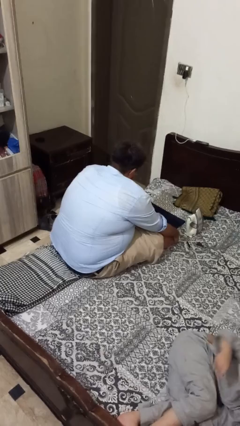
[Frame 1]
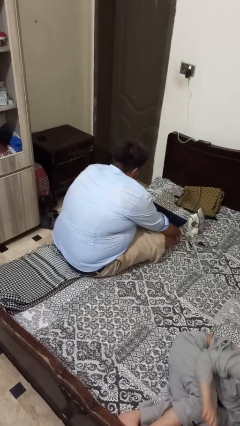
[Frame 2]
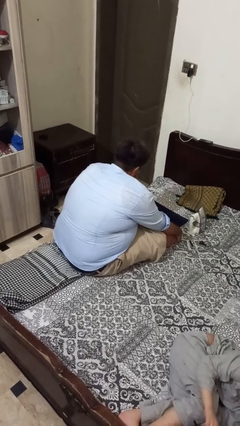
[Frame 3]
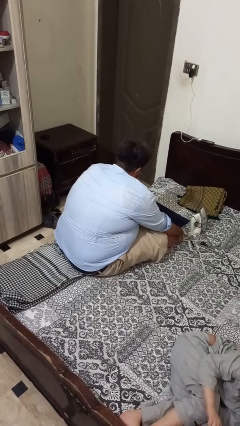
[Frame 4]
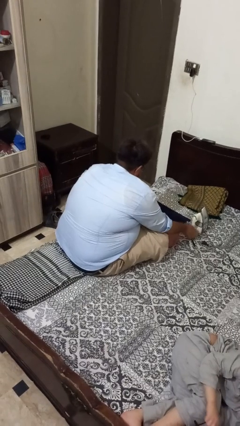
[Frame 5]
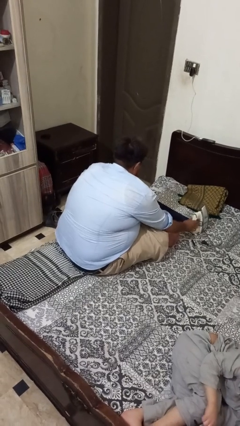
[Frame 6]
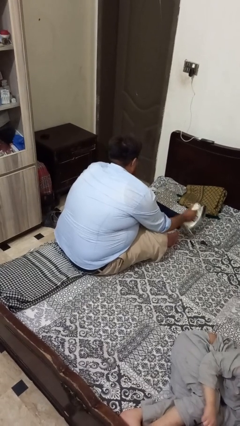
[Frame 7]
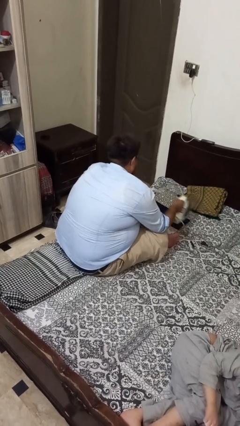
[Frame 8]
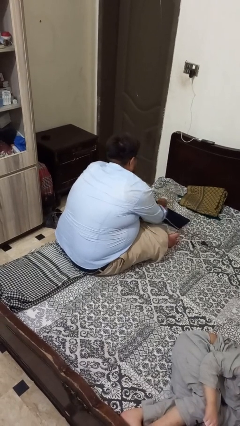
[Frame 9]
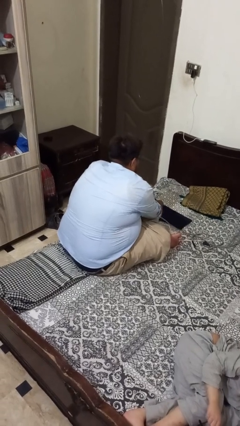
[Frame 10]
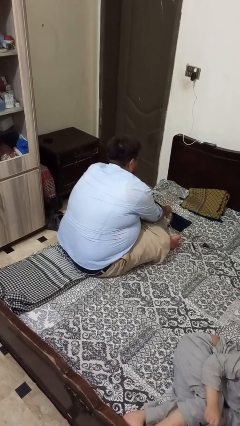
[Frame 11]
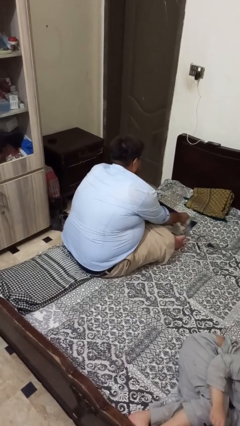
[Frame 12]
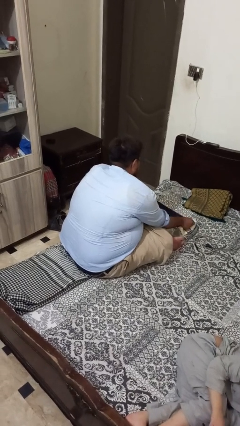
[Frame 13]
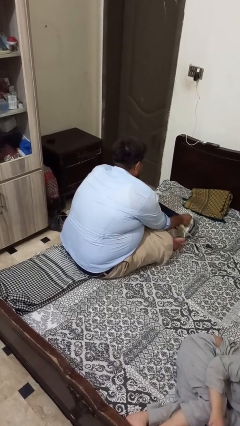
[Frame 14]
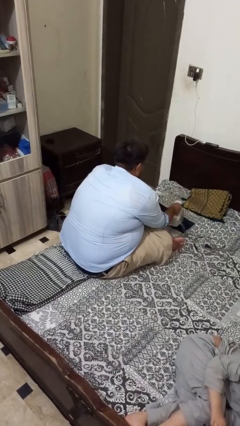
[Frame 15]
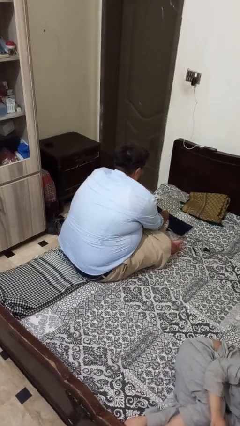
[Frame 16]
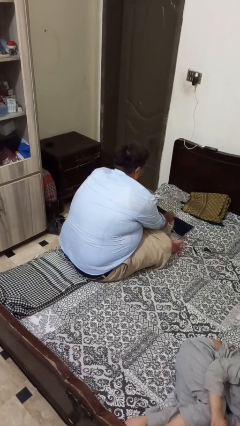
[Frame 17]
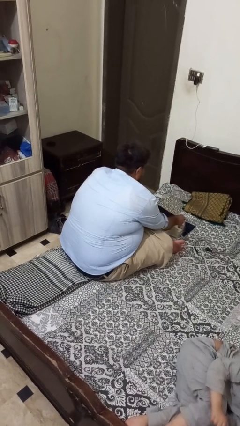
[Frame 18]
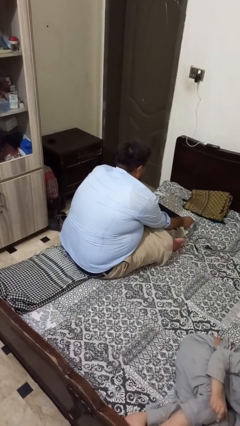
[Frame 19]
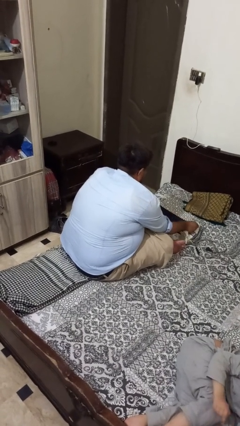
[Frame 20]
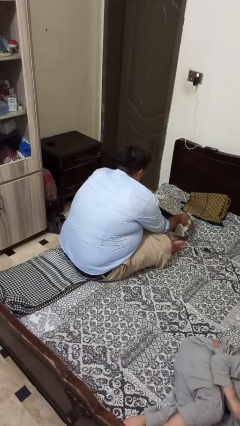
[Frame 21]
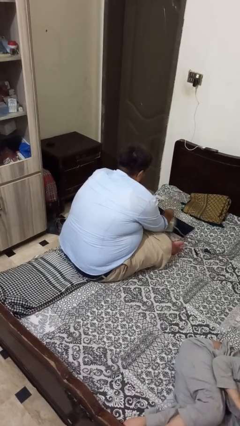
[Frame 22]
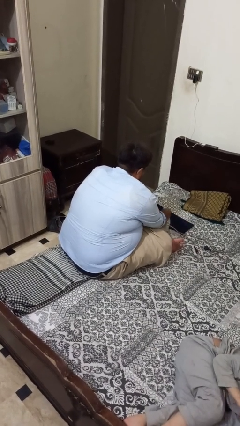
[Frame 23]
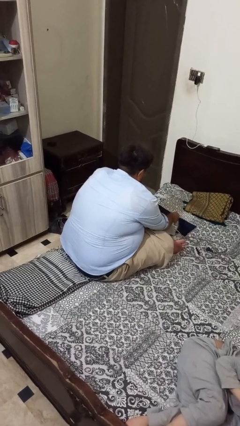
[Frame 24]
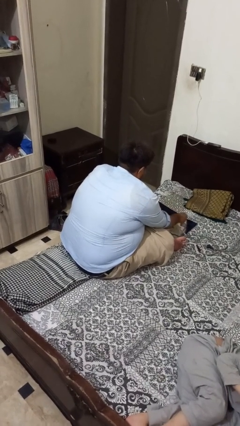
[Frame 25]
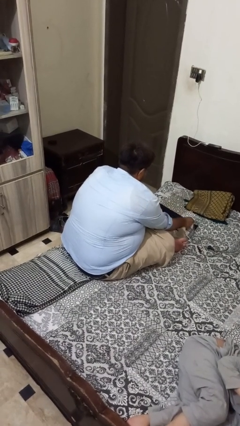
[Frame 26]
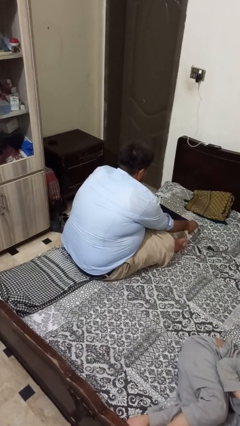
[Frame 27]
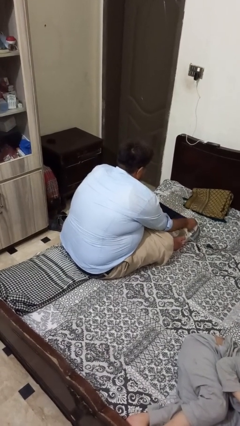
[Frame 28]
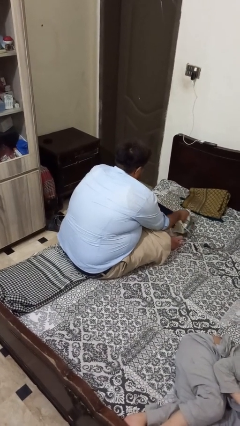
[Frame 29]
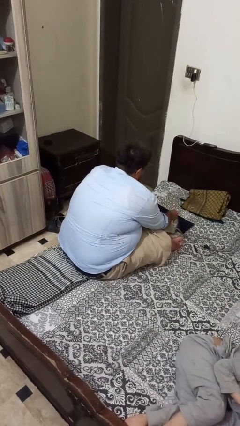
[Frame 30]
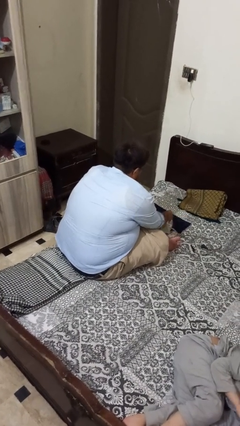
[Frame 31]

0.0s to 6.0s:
person irons clothes

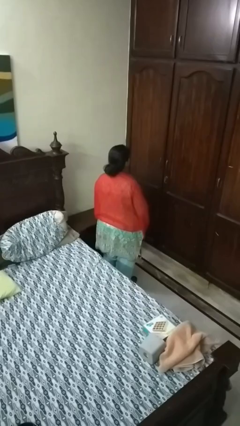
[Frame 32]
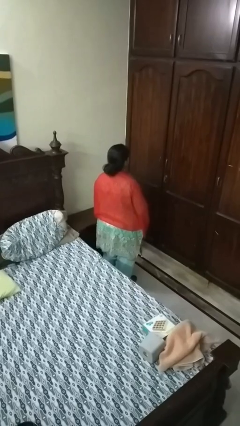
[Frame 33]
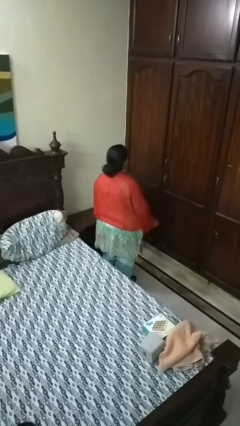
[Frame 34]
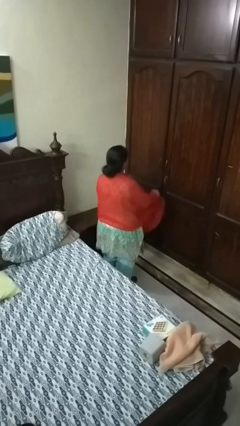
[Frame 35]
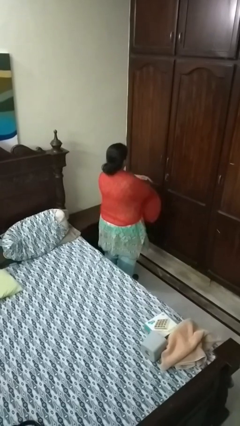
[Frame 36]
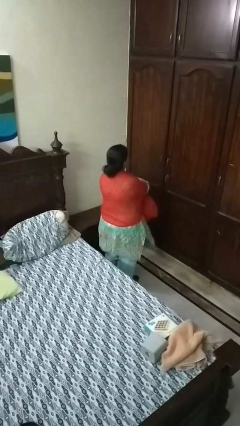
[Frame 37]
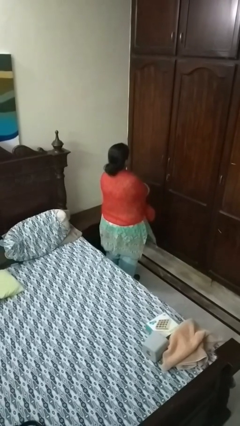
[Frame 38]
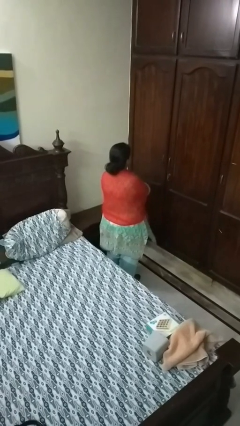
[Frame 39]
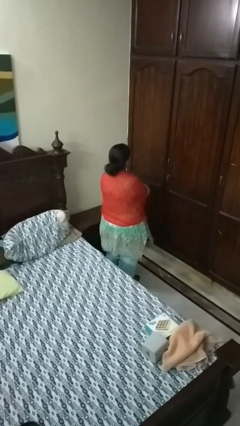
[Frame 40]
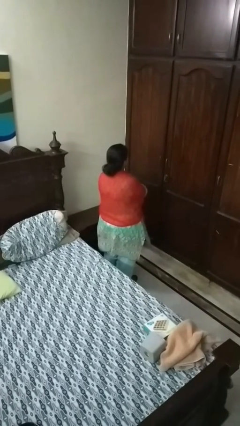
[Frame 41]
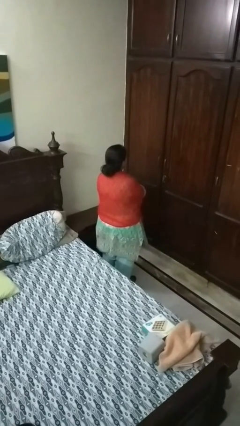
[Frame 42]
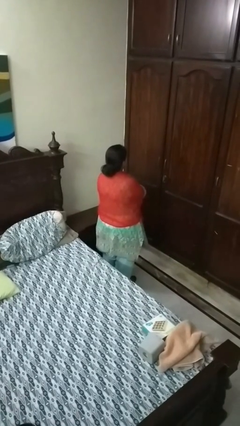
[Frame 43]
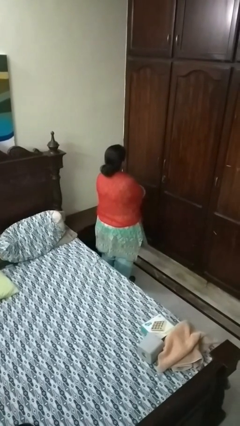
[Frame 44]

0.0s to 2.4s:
person crosses arms

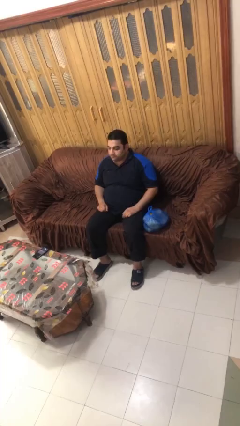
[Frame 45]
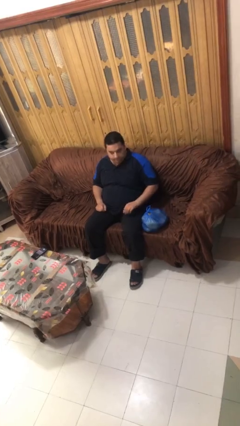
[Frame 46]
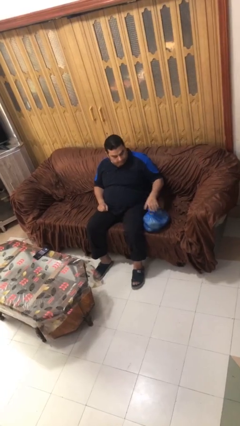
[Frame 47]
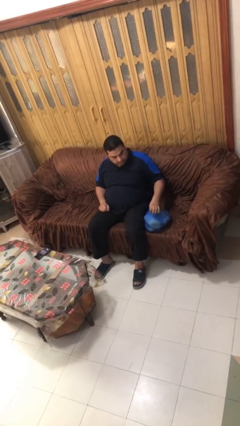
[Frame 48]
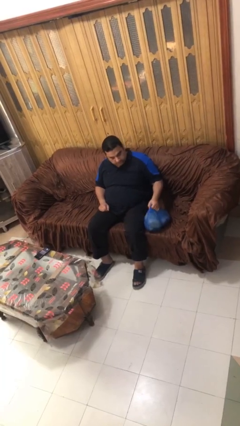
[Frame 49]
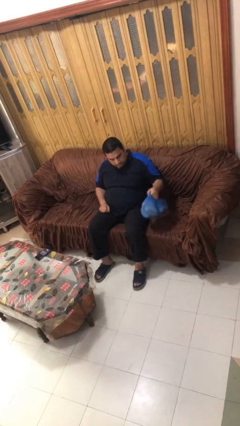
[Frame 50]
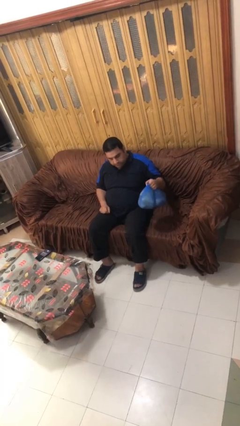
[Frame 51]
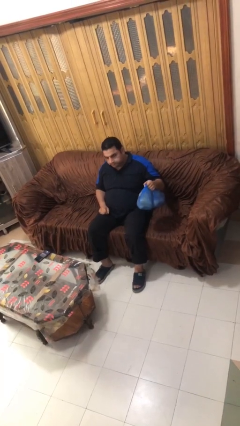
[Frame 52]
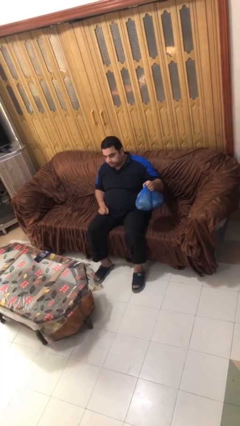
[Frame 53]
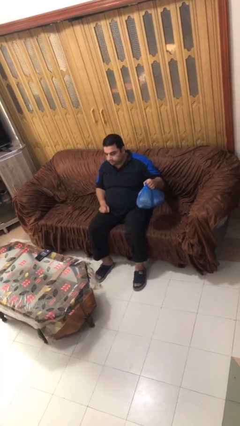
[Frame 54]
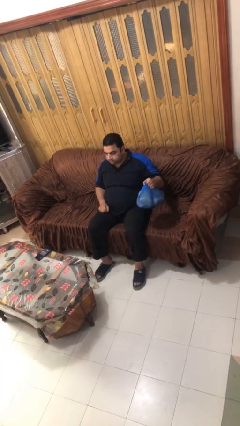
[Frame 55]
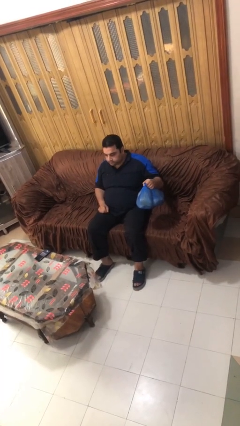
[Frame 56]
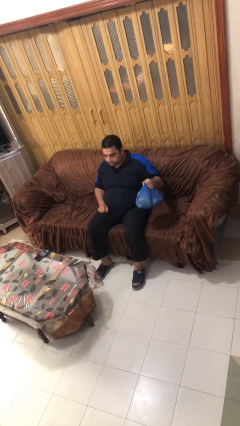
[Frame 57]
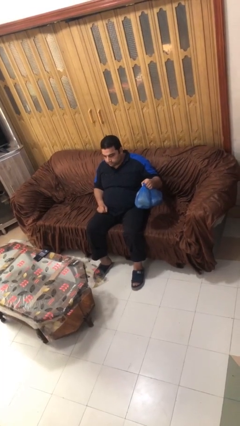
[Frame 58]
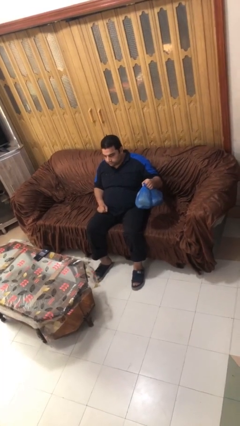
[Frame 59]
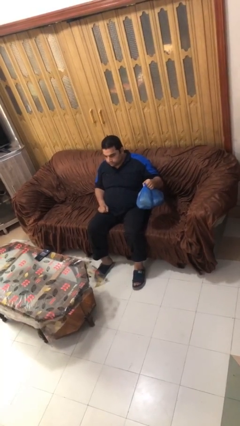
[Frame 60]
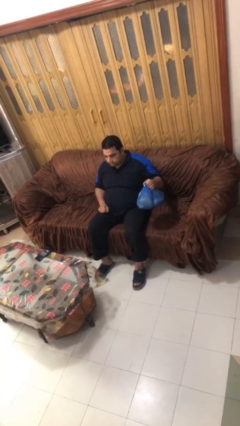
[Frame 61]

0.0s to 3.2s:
person picks up object from couch

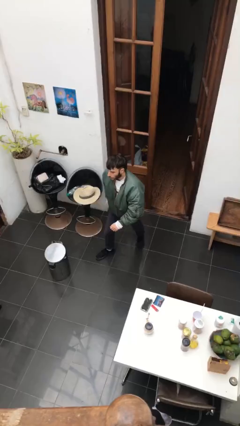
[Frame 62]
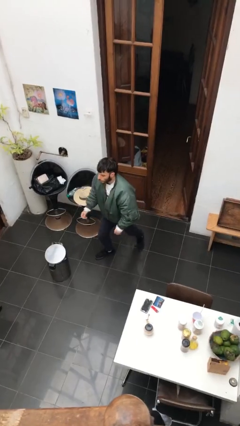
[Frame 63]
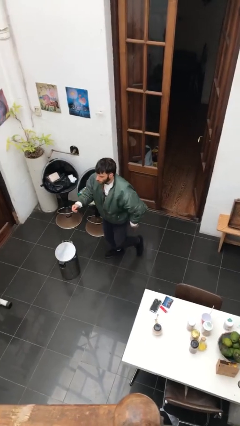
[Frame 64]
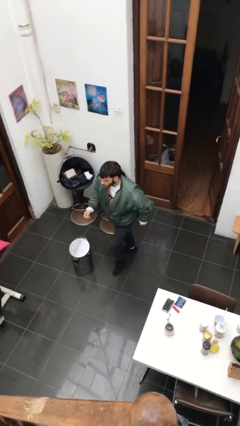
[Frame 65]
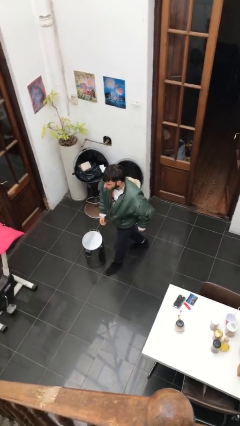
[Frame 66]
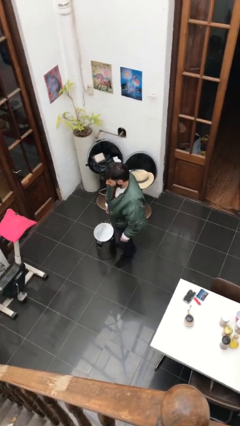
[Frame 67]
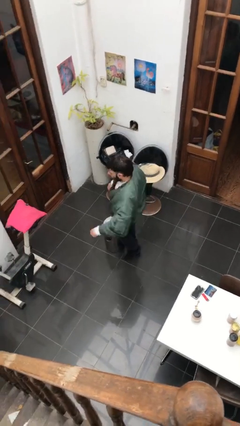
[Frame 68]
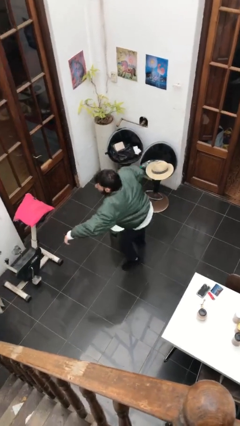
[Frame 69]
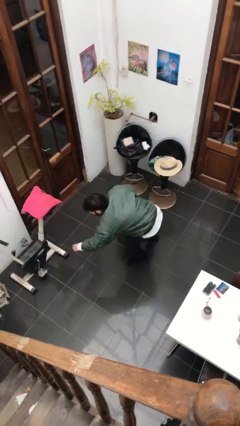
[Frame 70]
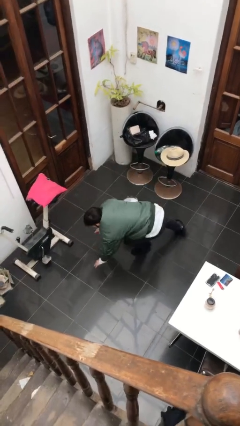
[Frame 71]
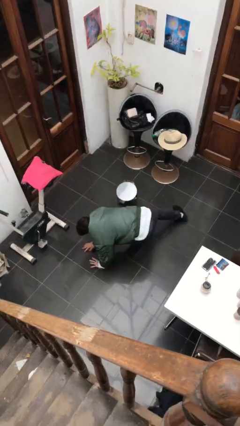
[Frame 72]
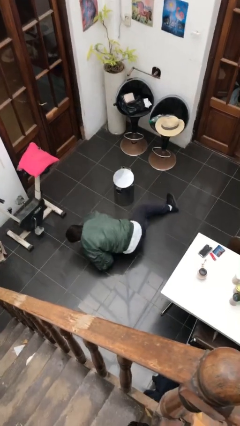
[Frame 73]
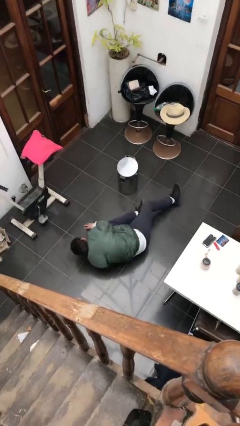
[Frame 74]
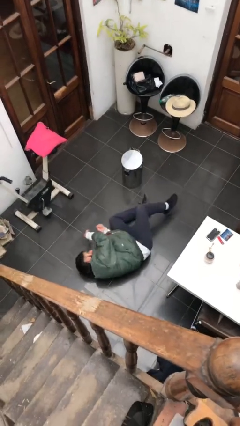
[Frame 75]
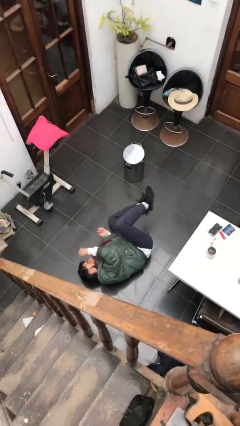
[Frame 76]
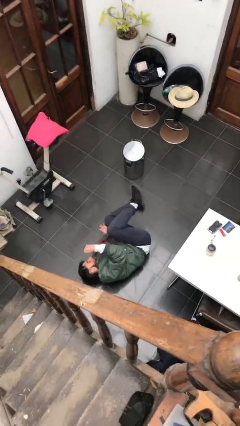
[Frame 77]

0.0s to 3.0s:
person trips on object on floor

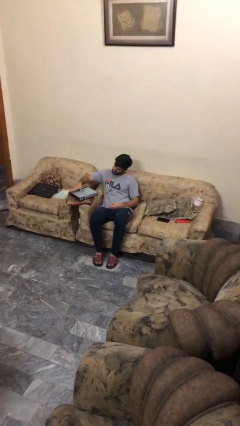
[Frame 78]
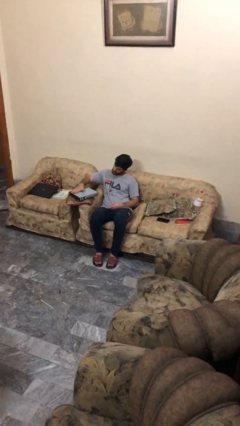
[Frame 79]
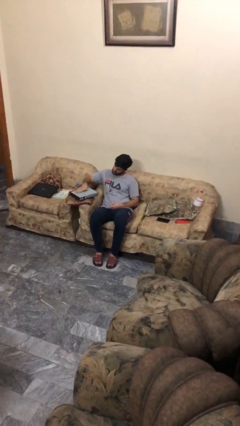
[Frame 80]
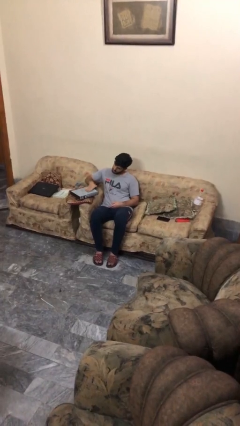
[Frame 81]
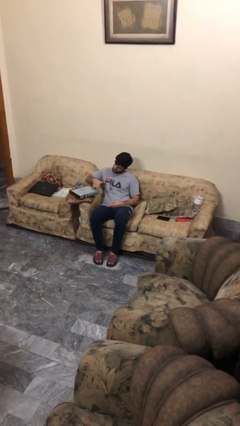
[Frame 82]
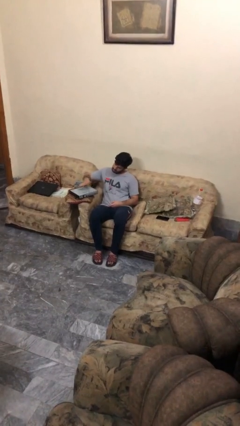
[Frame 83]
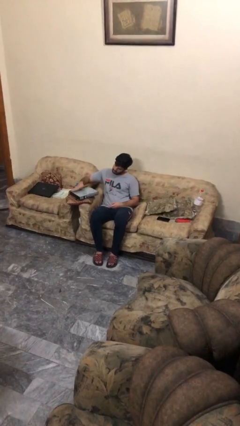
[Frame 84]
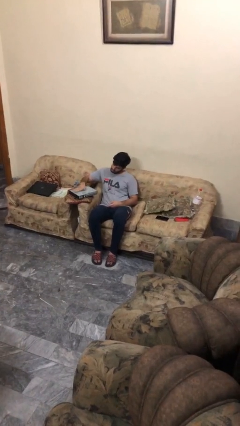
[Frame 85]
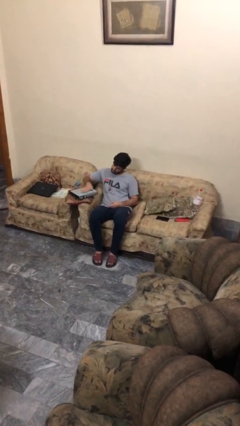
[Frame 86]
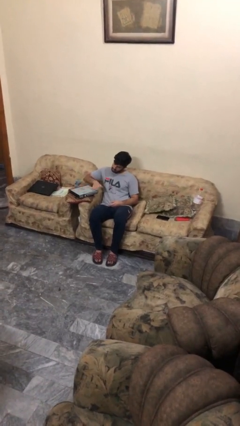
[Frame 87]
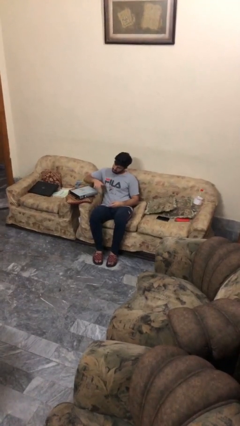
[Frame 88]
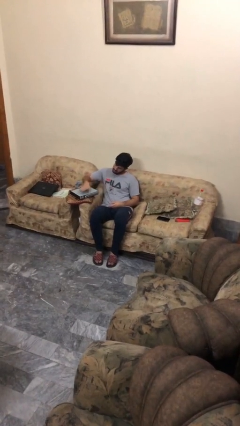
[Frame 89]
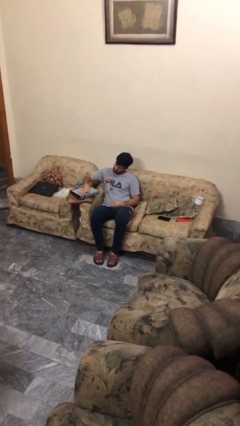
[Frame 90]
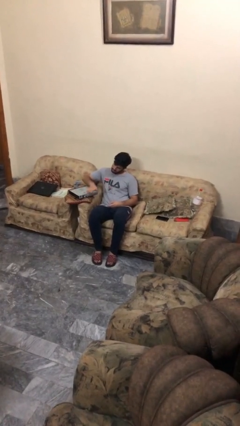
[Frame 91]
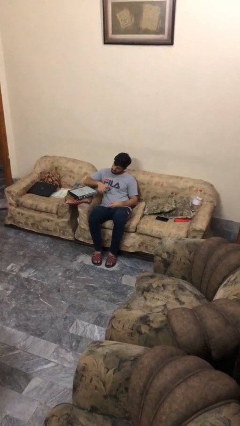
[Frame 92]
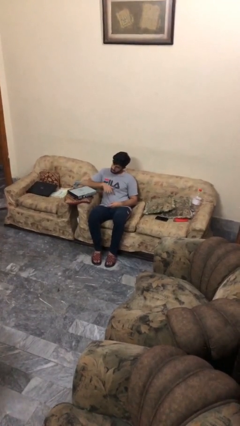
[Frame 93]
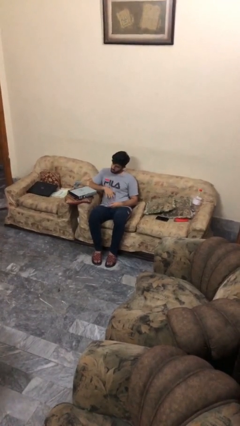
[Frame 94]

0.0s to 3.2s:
person waves hand over object
